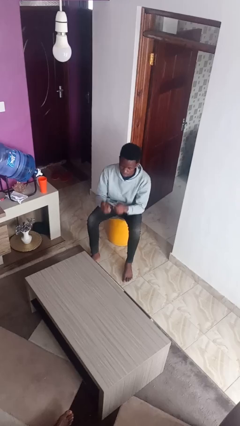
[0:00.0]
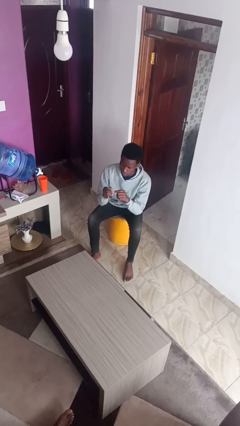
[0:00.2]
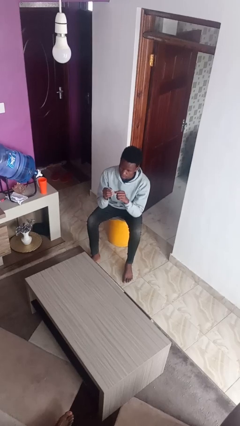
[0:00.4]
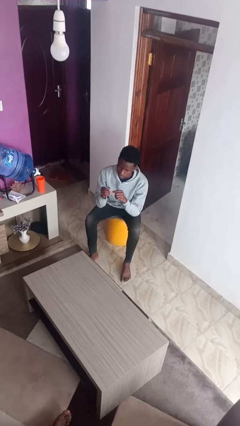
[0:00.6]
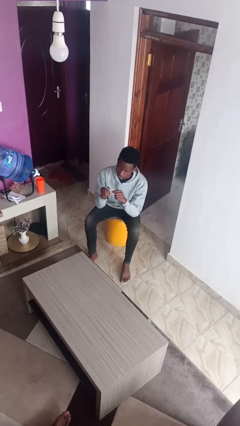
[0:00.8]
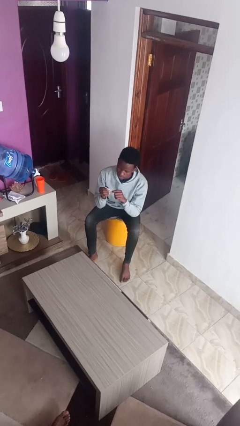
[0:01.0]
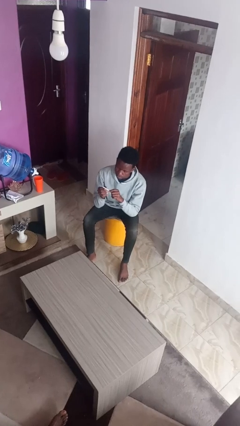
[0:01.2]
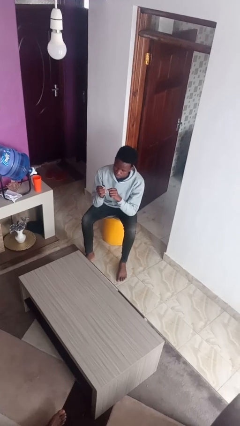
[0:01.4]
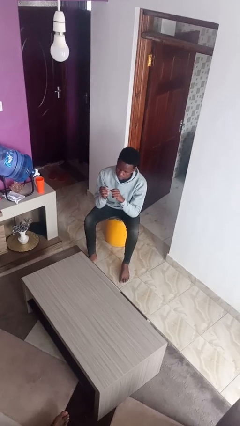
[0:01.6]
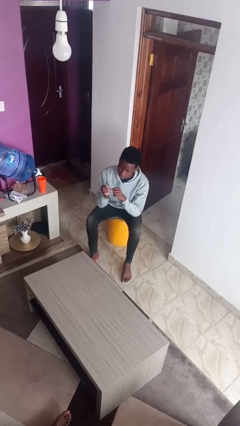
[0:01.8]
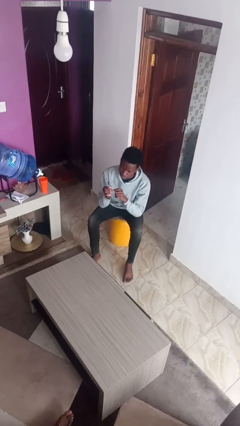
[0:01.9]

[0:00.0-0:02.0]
person files fingernails

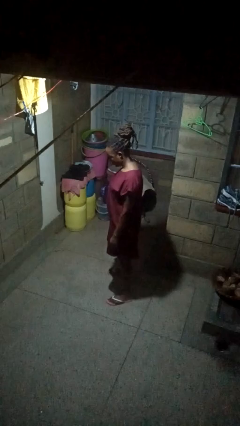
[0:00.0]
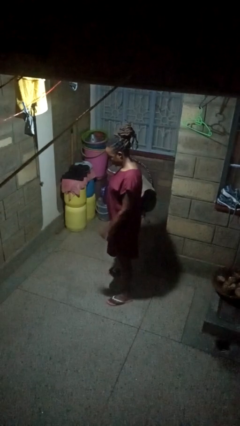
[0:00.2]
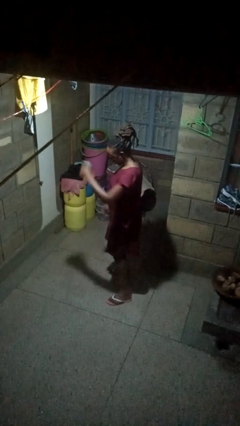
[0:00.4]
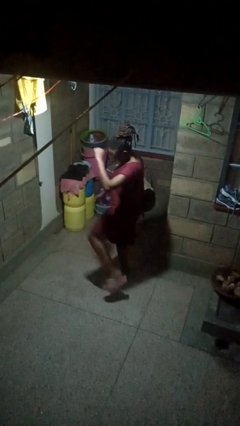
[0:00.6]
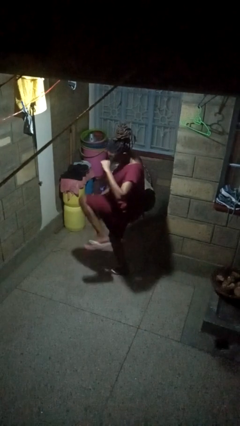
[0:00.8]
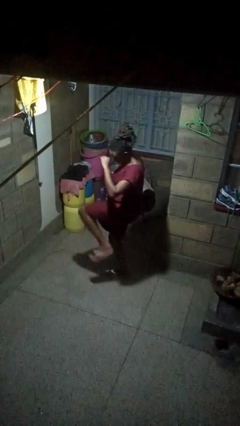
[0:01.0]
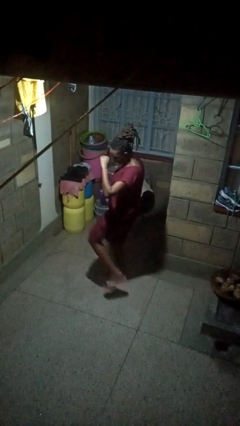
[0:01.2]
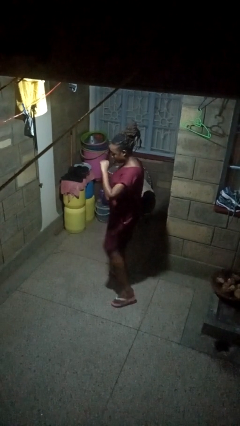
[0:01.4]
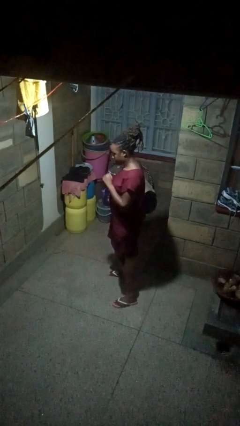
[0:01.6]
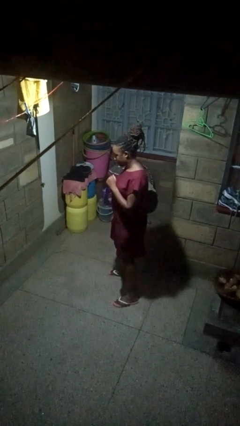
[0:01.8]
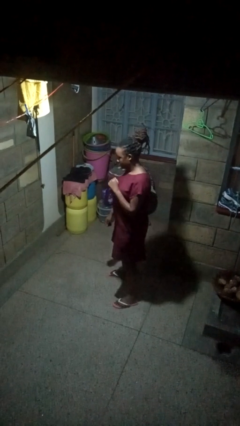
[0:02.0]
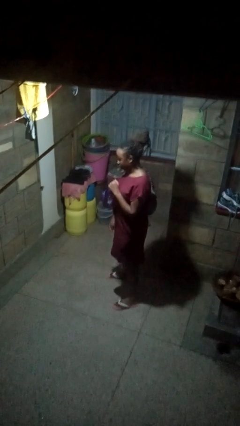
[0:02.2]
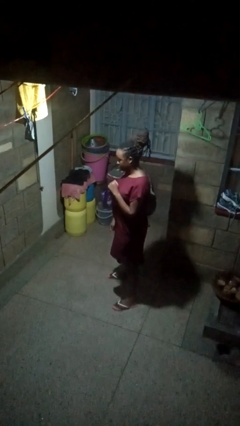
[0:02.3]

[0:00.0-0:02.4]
person karate kicks

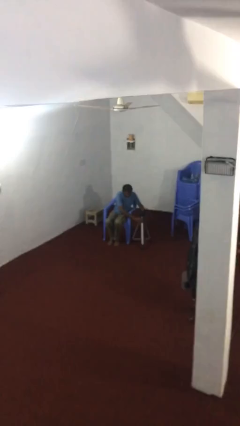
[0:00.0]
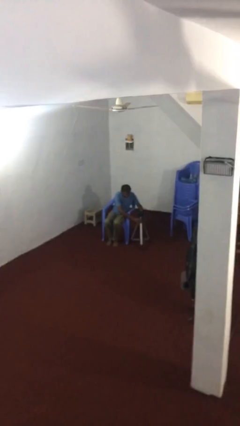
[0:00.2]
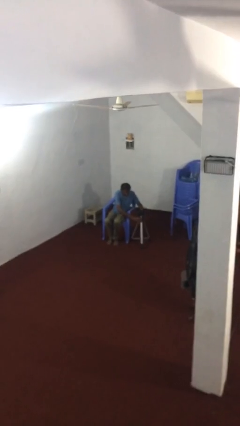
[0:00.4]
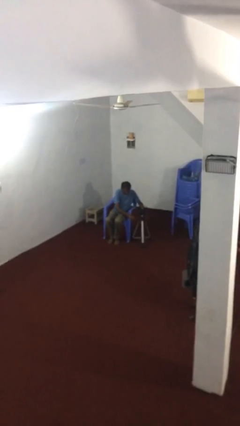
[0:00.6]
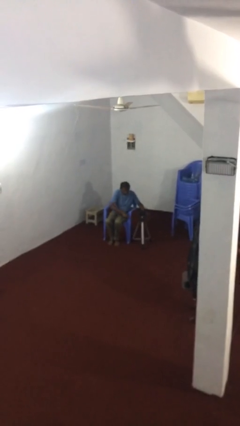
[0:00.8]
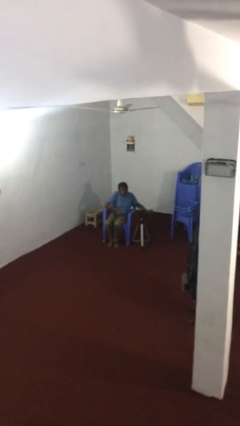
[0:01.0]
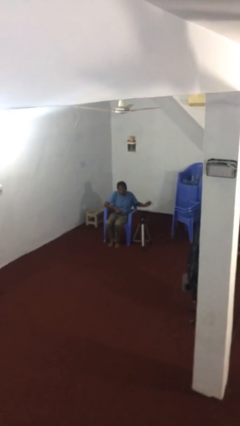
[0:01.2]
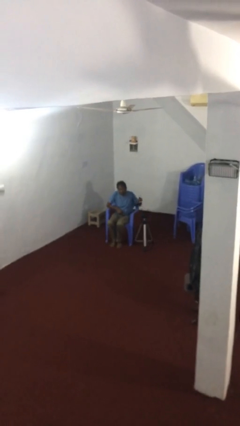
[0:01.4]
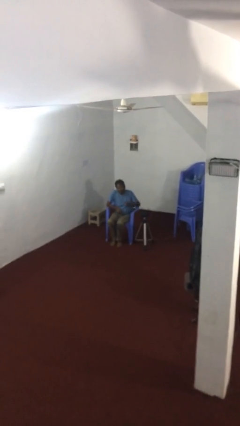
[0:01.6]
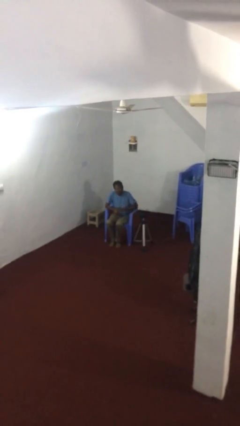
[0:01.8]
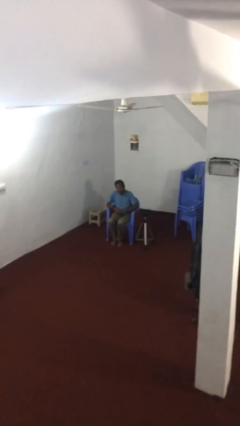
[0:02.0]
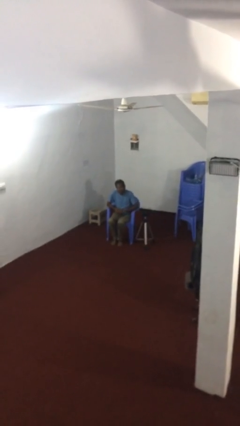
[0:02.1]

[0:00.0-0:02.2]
person puts down object on floor

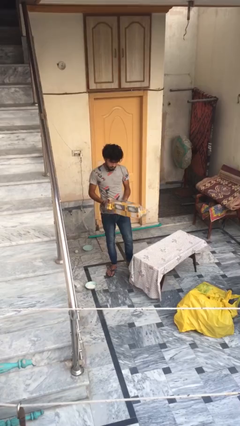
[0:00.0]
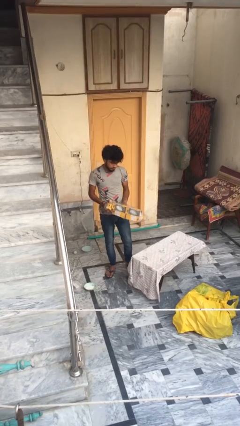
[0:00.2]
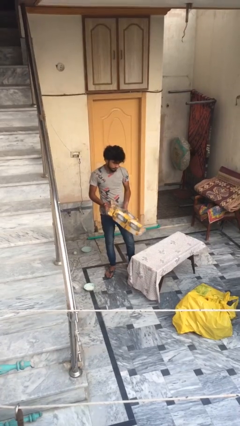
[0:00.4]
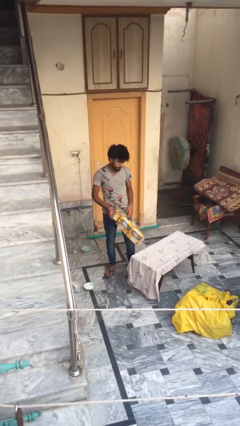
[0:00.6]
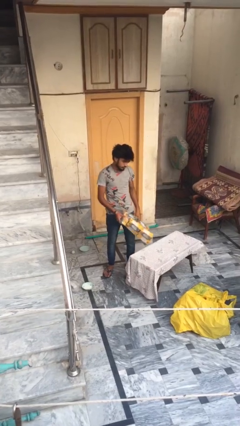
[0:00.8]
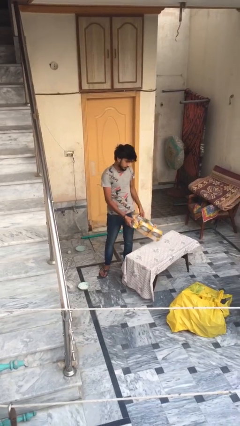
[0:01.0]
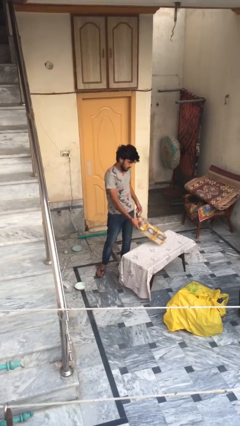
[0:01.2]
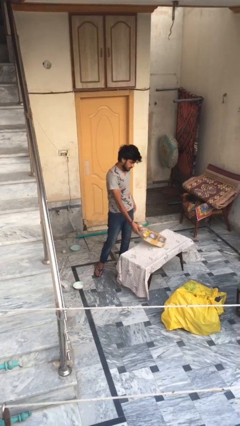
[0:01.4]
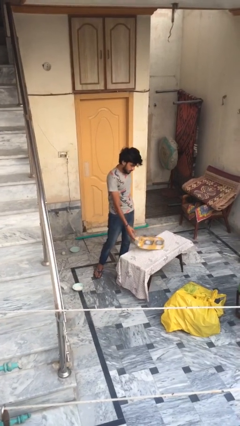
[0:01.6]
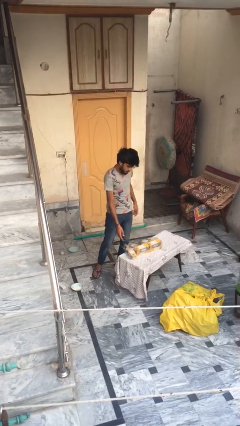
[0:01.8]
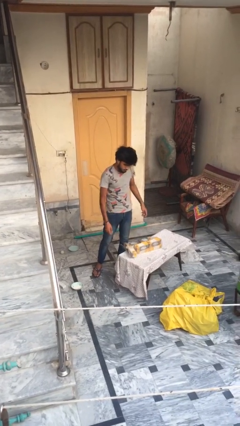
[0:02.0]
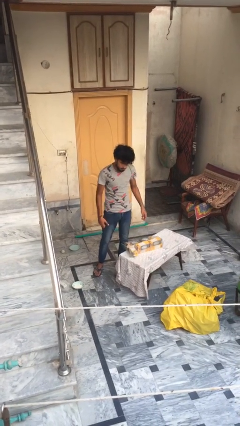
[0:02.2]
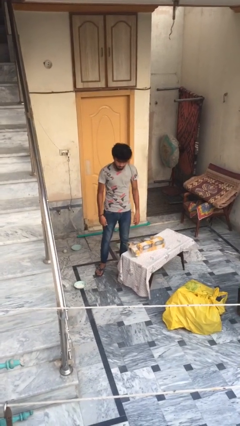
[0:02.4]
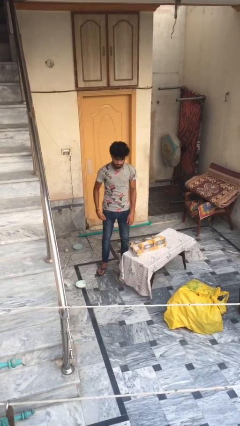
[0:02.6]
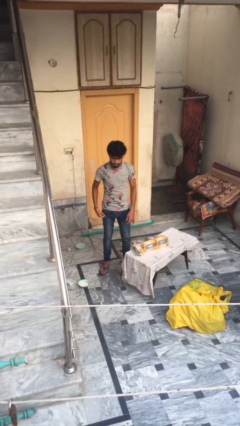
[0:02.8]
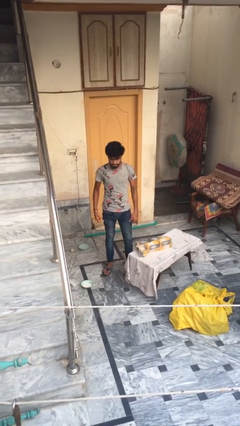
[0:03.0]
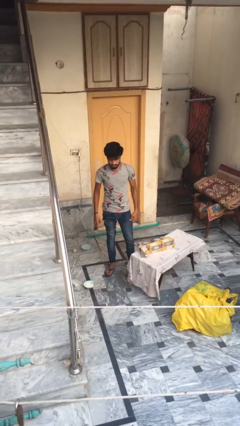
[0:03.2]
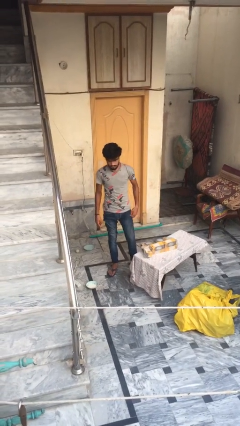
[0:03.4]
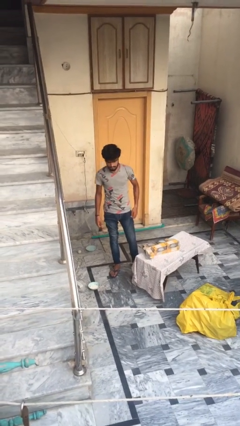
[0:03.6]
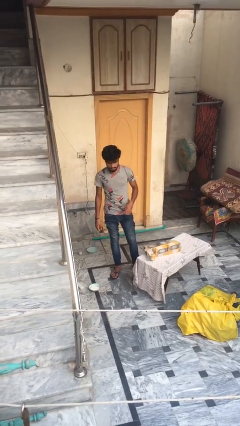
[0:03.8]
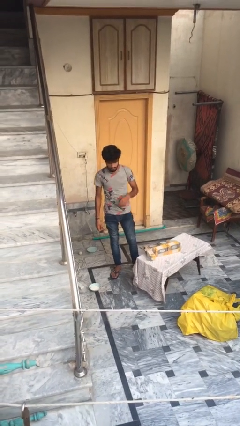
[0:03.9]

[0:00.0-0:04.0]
person puts down object on table

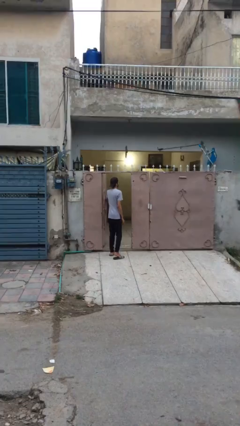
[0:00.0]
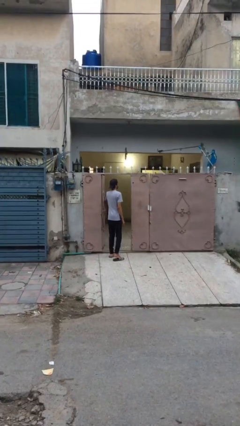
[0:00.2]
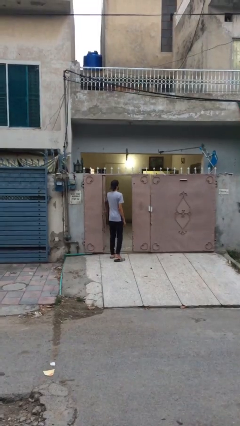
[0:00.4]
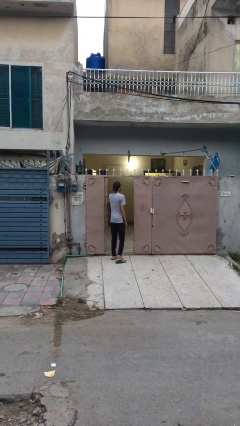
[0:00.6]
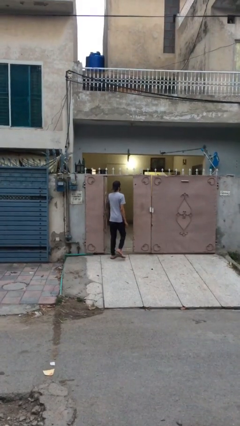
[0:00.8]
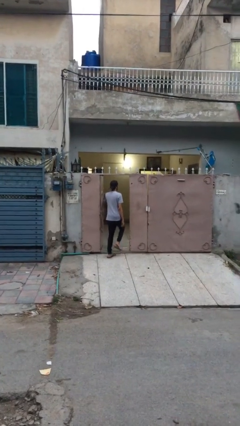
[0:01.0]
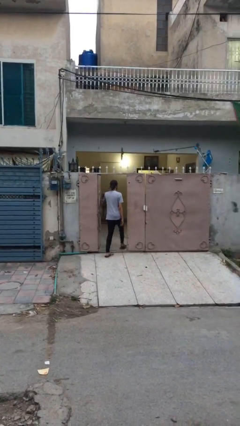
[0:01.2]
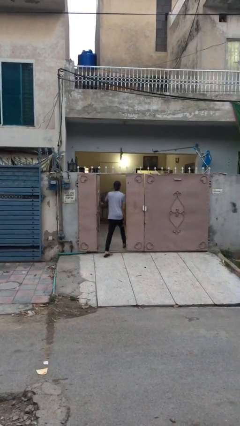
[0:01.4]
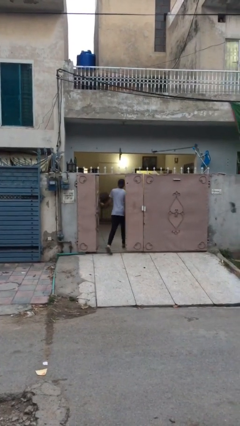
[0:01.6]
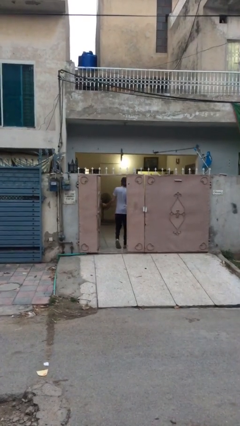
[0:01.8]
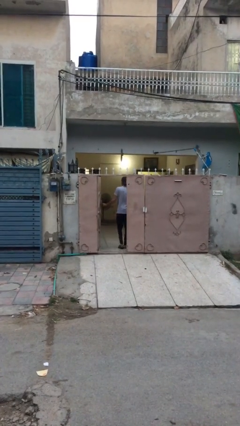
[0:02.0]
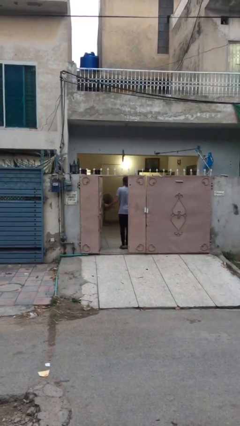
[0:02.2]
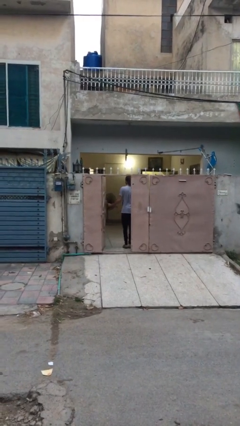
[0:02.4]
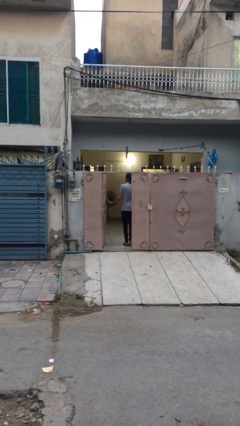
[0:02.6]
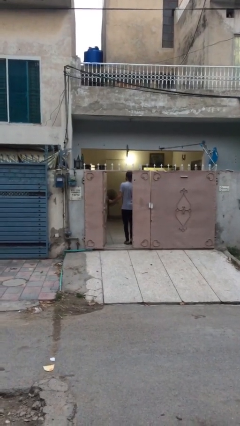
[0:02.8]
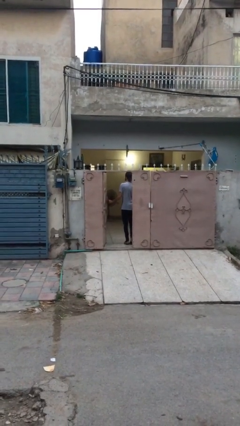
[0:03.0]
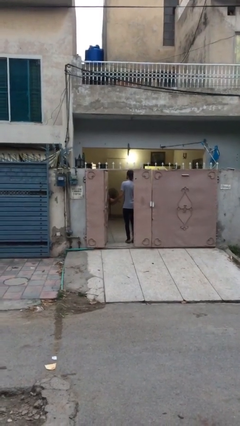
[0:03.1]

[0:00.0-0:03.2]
person exits scene through structure

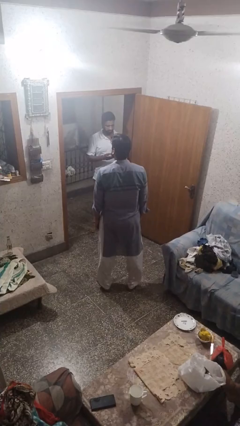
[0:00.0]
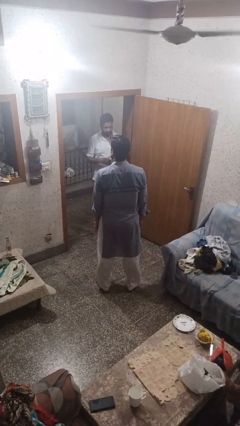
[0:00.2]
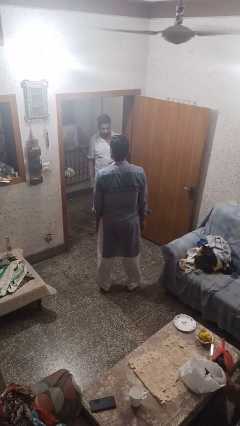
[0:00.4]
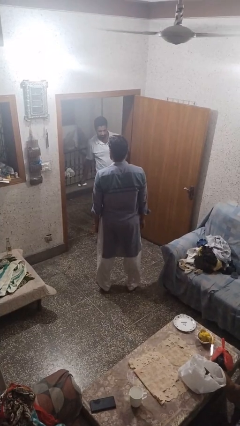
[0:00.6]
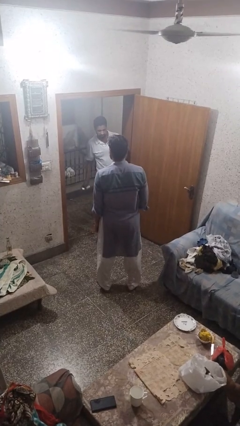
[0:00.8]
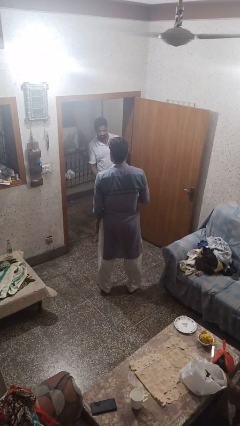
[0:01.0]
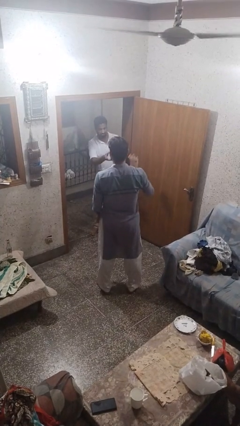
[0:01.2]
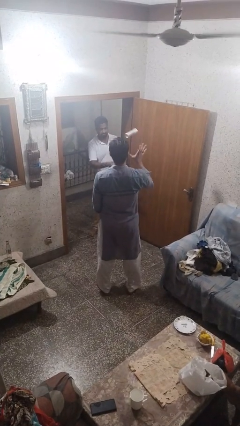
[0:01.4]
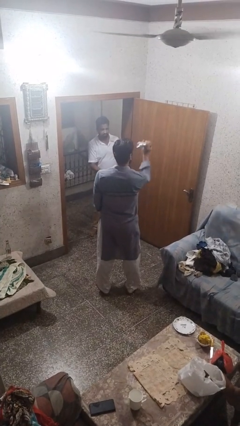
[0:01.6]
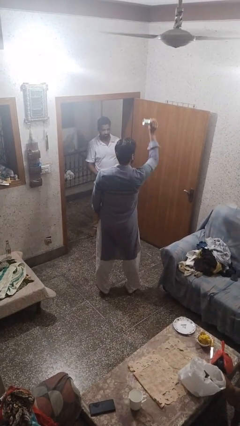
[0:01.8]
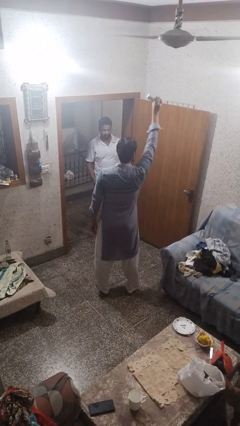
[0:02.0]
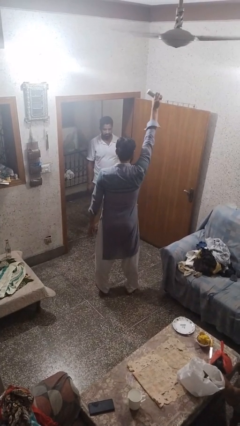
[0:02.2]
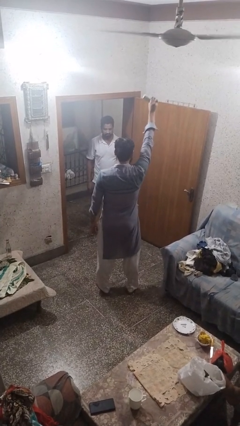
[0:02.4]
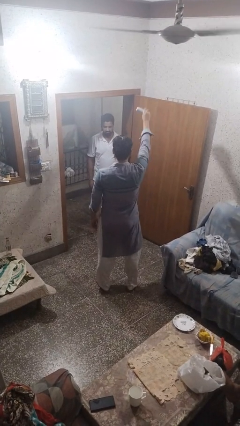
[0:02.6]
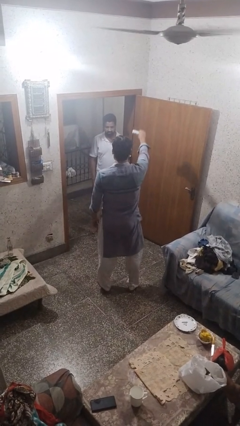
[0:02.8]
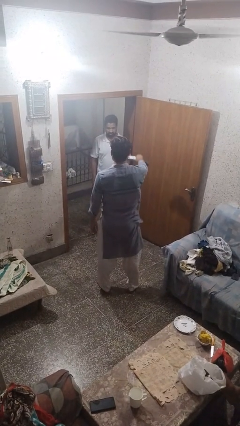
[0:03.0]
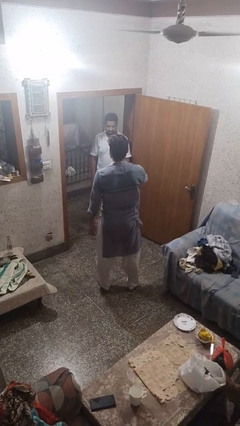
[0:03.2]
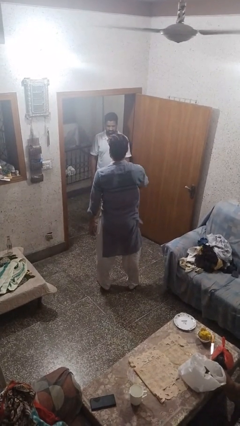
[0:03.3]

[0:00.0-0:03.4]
person catches object from person
